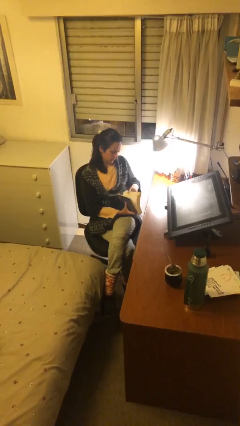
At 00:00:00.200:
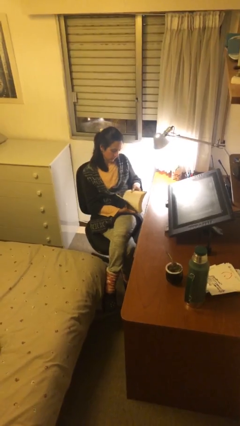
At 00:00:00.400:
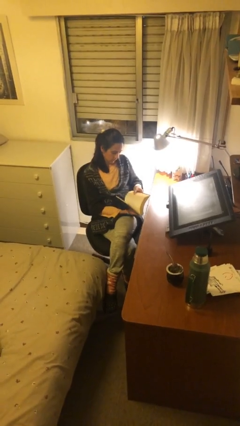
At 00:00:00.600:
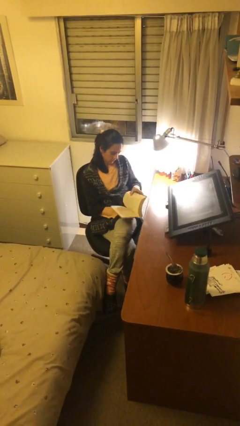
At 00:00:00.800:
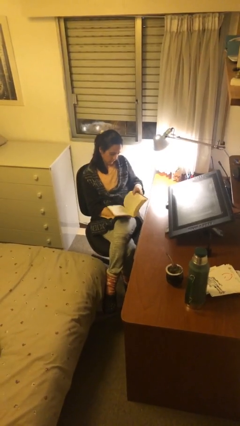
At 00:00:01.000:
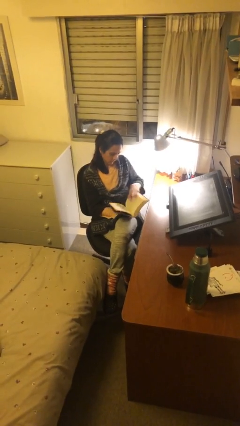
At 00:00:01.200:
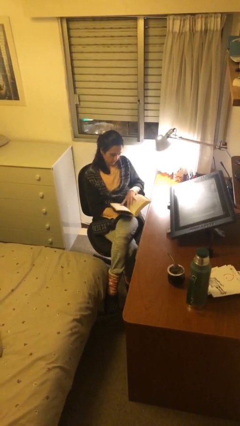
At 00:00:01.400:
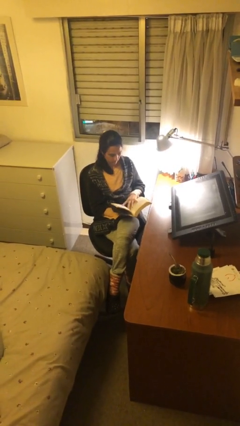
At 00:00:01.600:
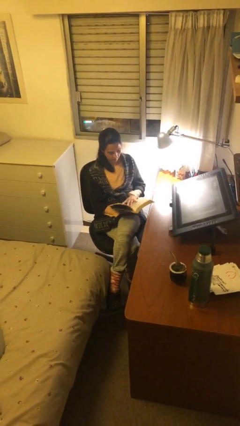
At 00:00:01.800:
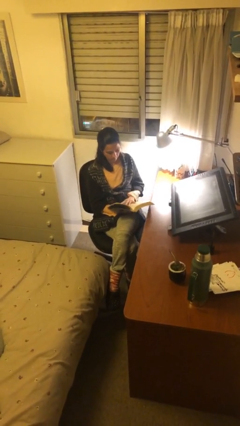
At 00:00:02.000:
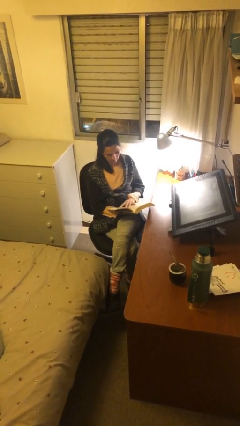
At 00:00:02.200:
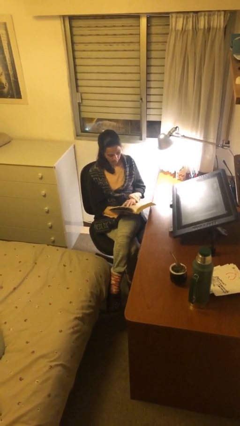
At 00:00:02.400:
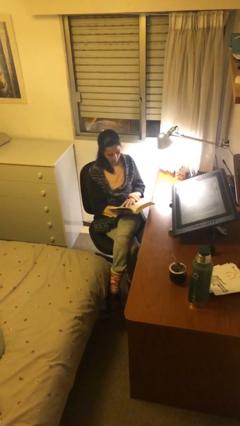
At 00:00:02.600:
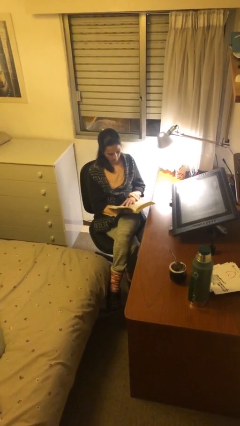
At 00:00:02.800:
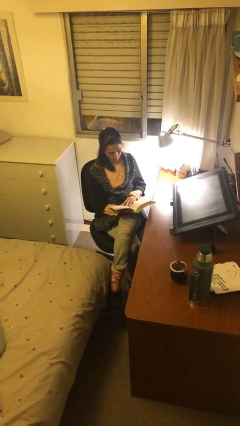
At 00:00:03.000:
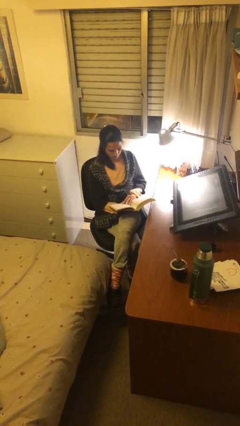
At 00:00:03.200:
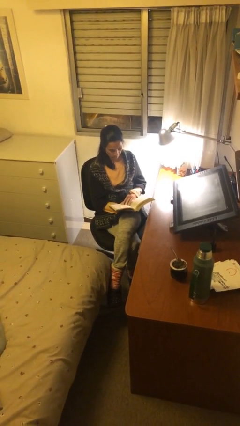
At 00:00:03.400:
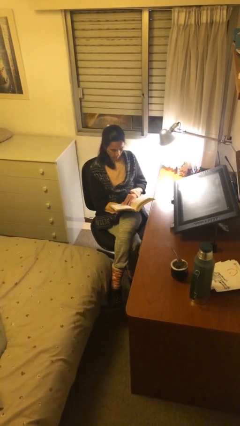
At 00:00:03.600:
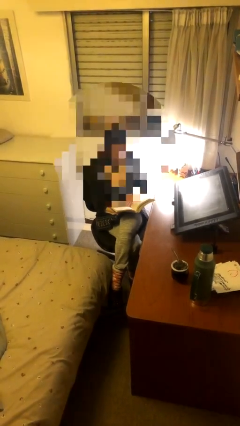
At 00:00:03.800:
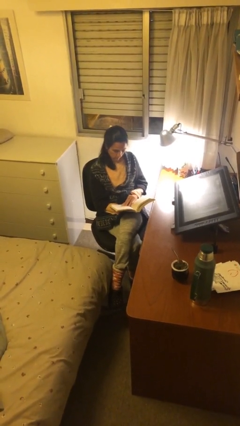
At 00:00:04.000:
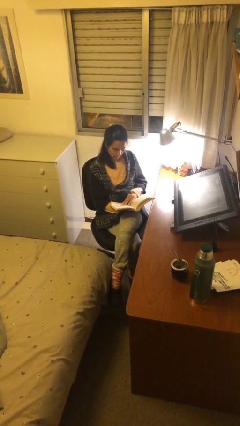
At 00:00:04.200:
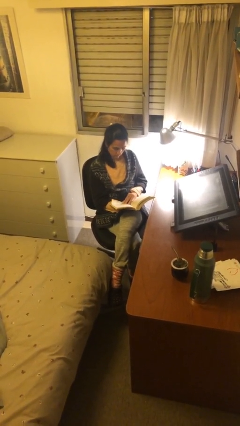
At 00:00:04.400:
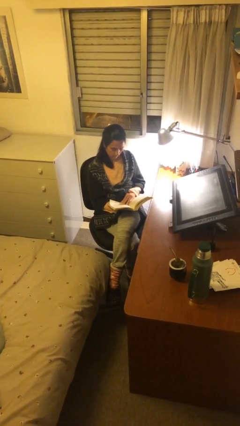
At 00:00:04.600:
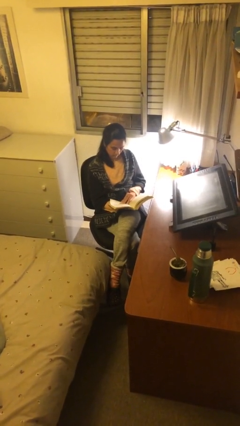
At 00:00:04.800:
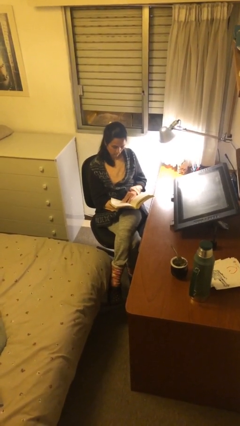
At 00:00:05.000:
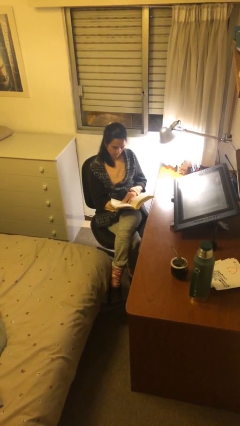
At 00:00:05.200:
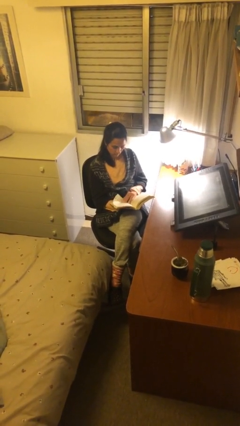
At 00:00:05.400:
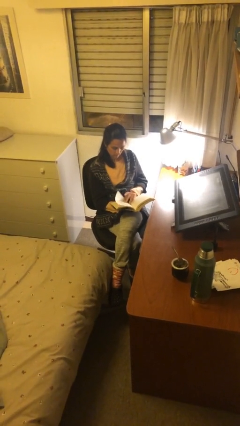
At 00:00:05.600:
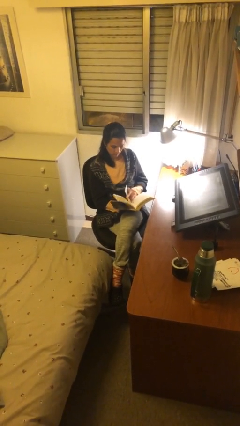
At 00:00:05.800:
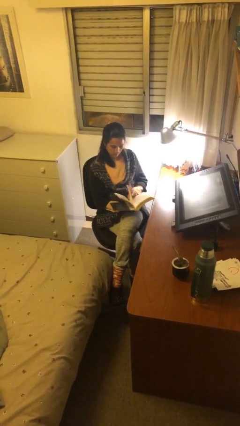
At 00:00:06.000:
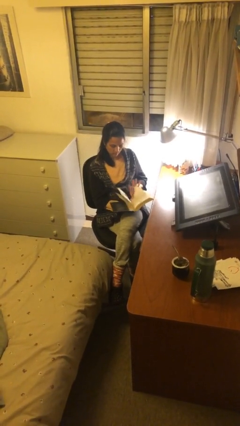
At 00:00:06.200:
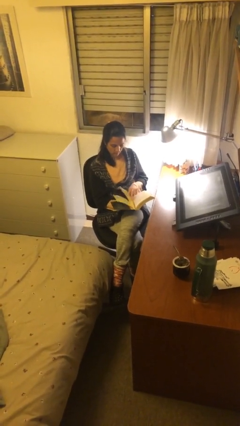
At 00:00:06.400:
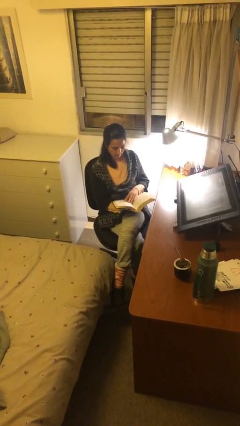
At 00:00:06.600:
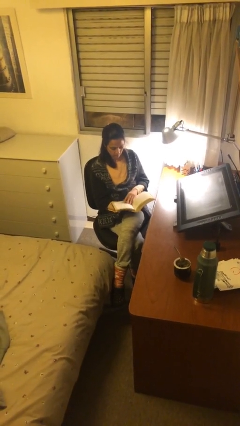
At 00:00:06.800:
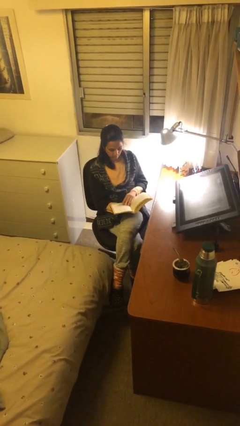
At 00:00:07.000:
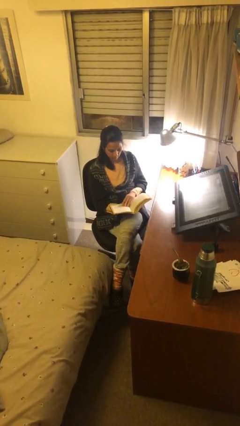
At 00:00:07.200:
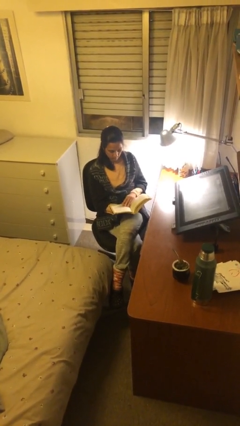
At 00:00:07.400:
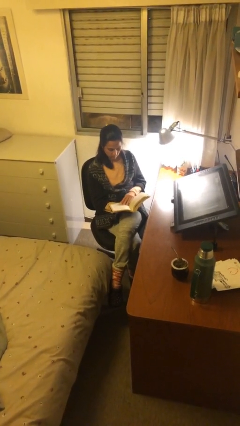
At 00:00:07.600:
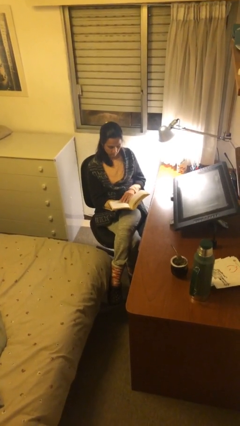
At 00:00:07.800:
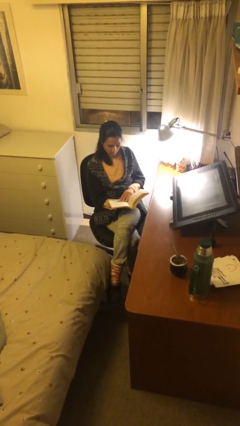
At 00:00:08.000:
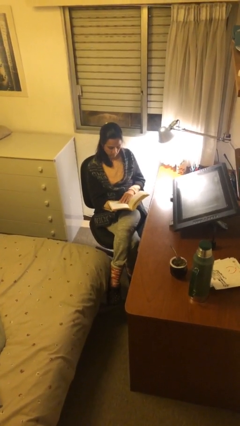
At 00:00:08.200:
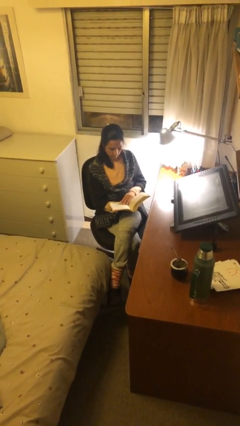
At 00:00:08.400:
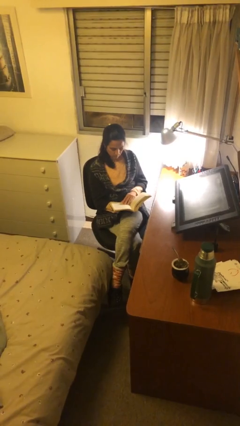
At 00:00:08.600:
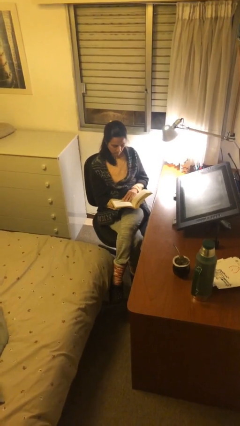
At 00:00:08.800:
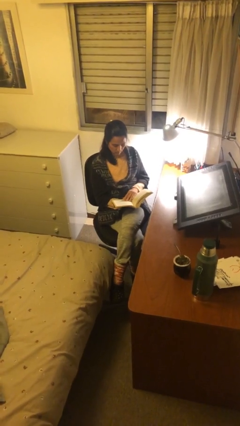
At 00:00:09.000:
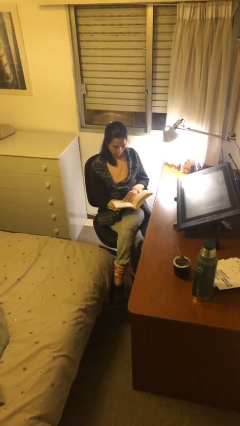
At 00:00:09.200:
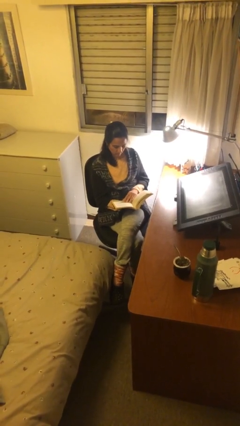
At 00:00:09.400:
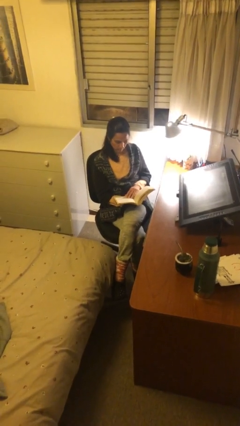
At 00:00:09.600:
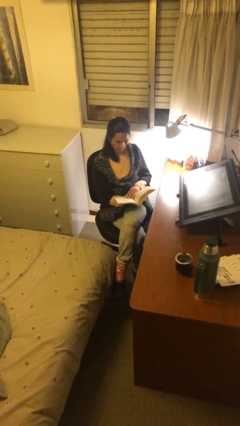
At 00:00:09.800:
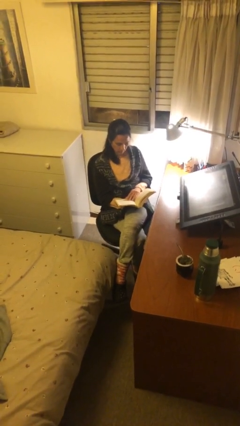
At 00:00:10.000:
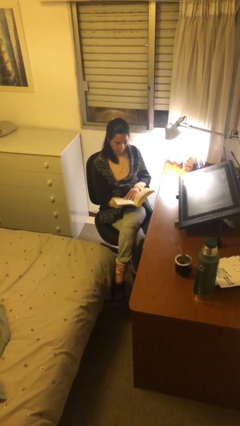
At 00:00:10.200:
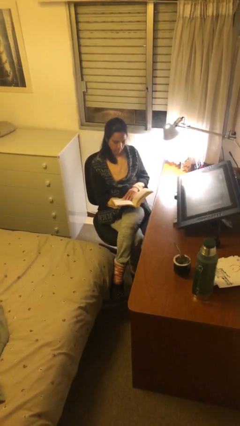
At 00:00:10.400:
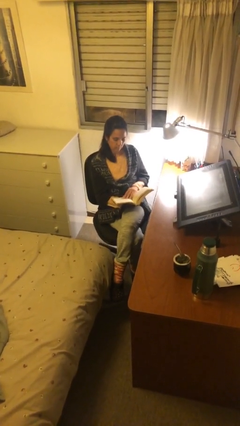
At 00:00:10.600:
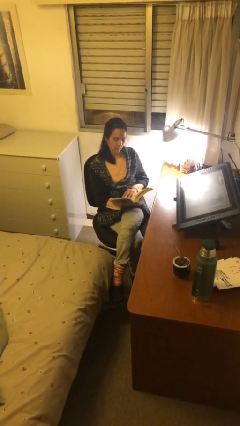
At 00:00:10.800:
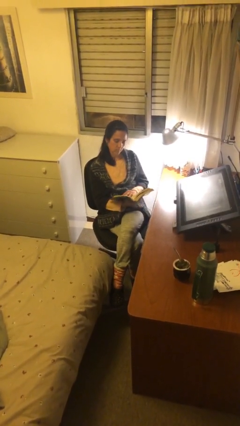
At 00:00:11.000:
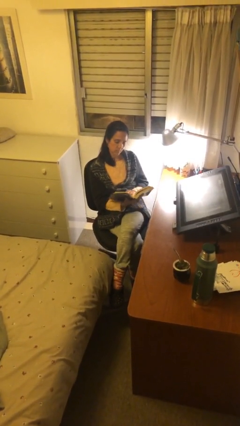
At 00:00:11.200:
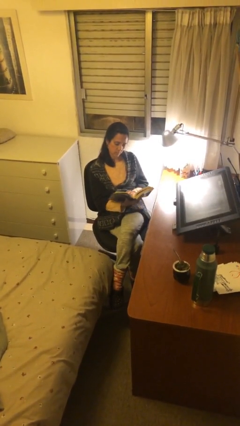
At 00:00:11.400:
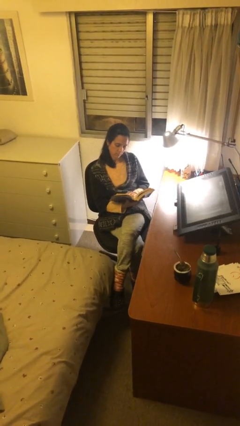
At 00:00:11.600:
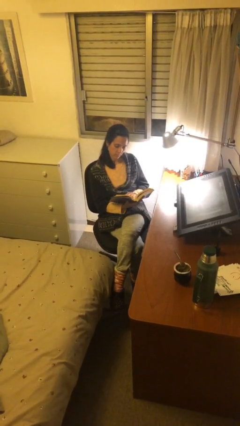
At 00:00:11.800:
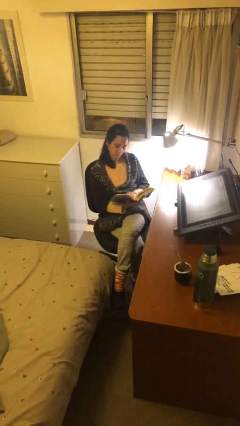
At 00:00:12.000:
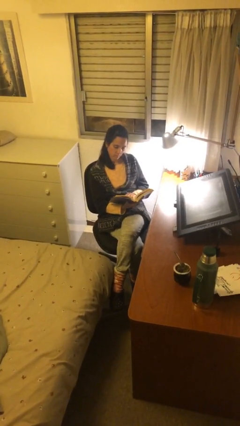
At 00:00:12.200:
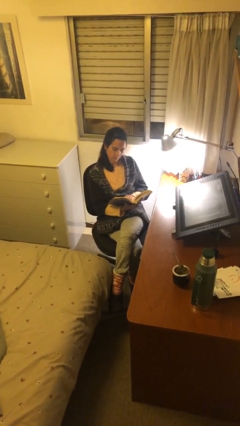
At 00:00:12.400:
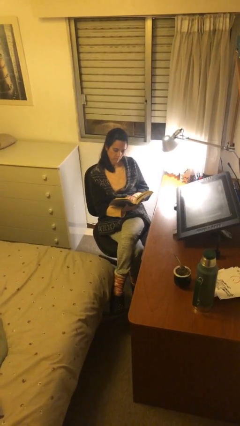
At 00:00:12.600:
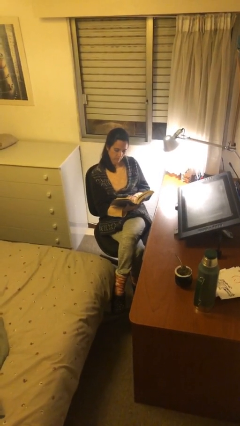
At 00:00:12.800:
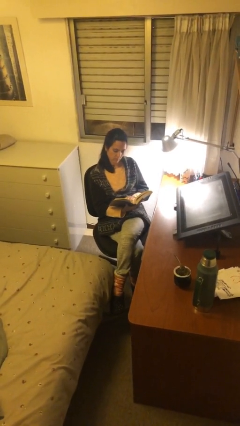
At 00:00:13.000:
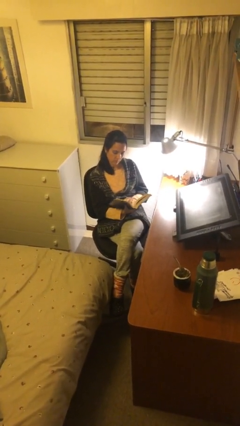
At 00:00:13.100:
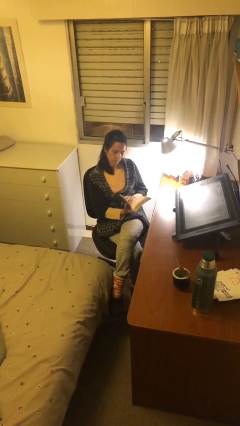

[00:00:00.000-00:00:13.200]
person reads document

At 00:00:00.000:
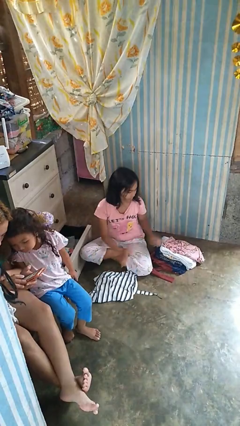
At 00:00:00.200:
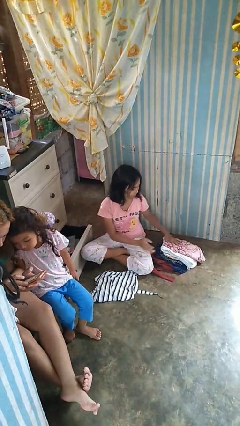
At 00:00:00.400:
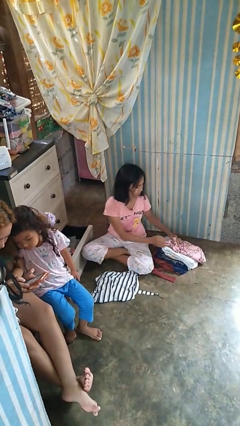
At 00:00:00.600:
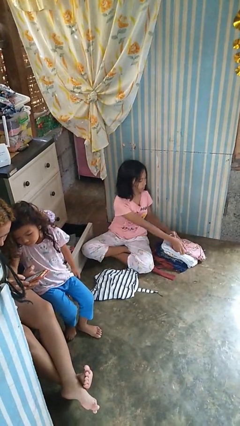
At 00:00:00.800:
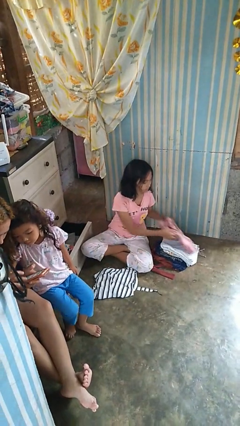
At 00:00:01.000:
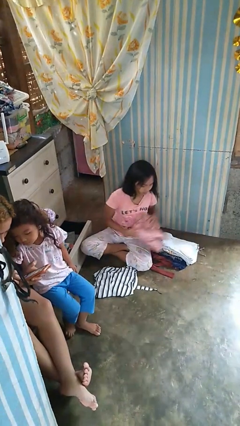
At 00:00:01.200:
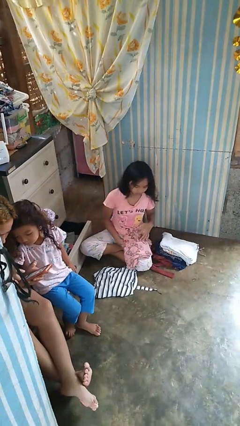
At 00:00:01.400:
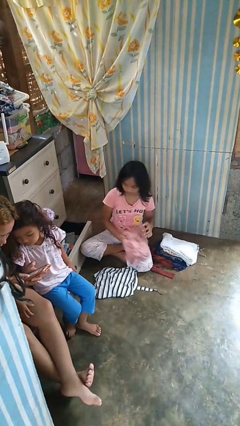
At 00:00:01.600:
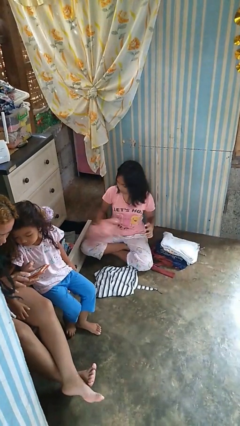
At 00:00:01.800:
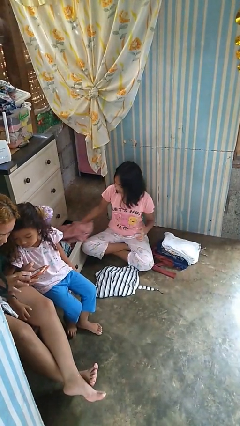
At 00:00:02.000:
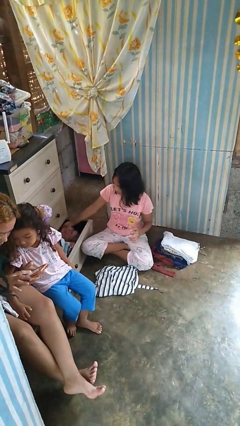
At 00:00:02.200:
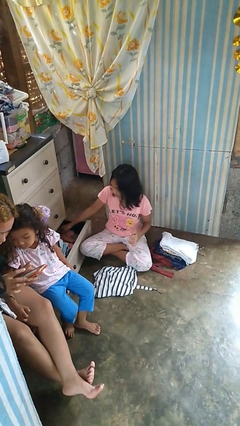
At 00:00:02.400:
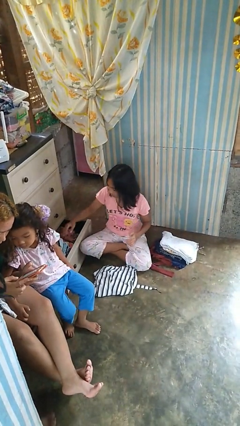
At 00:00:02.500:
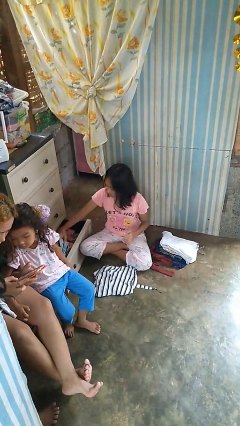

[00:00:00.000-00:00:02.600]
person puts clothes into dresser

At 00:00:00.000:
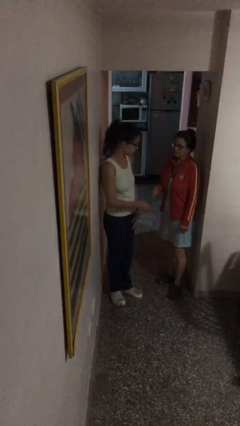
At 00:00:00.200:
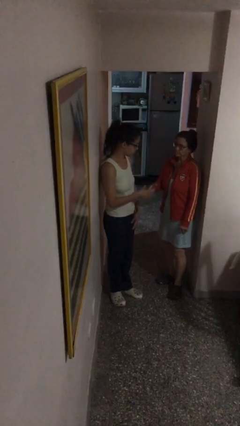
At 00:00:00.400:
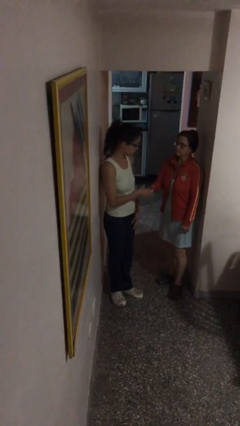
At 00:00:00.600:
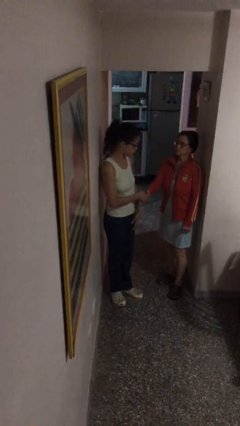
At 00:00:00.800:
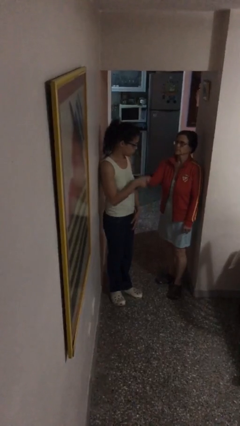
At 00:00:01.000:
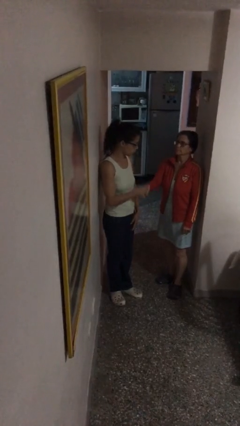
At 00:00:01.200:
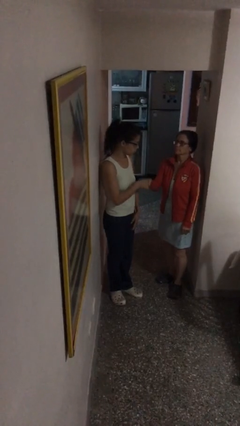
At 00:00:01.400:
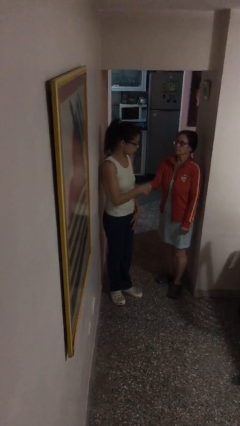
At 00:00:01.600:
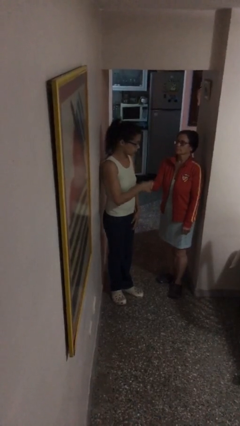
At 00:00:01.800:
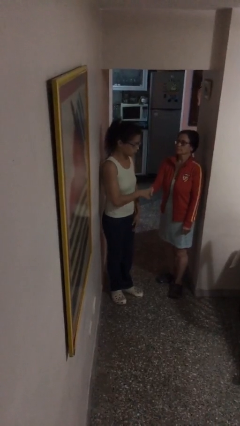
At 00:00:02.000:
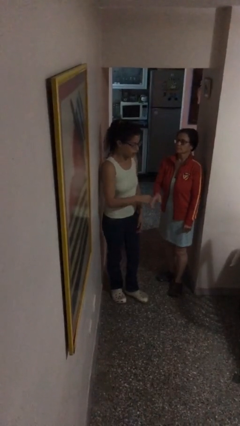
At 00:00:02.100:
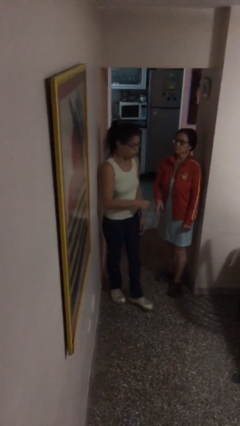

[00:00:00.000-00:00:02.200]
person shakes hand
